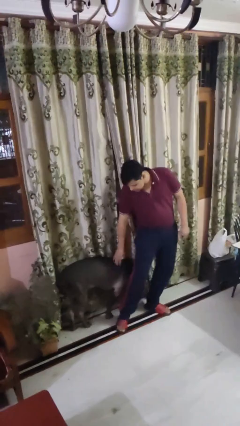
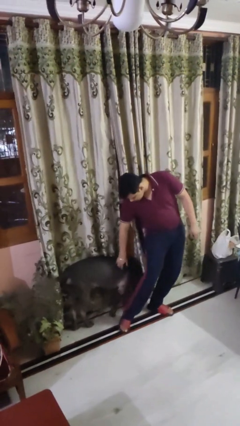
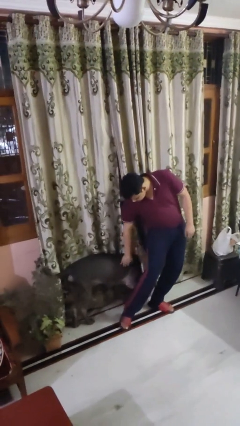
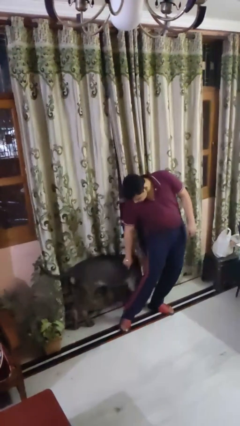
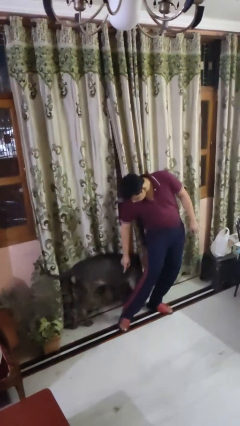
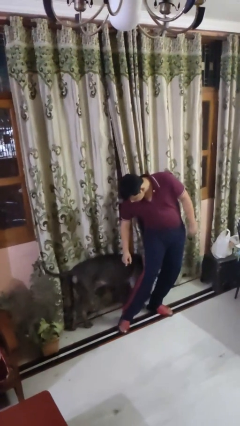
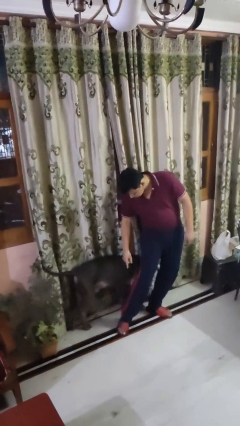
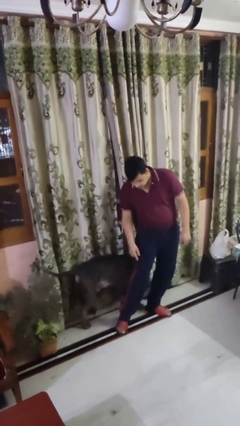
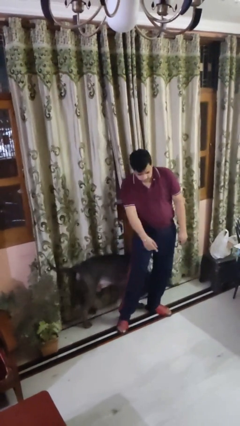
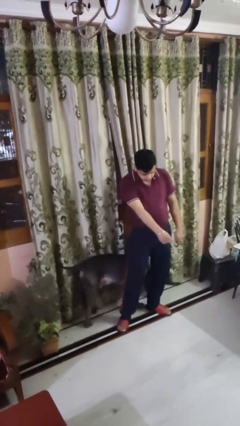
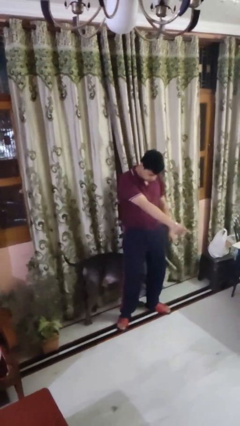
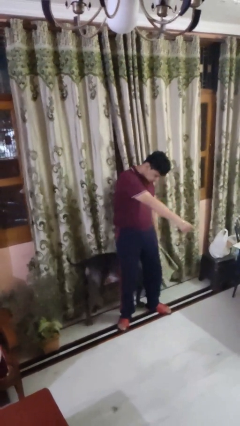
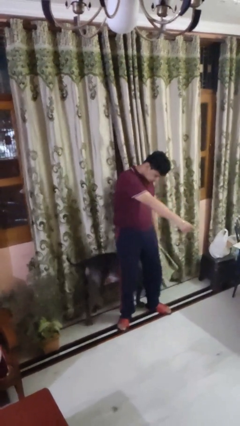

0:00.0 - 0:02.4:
person points to dog

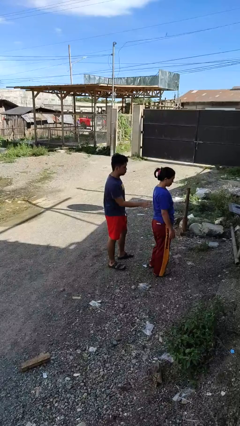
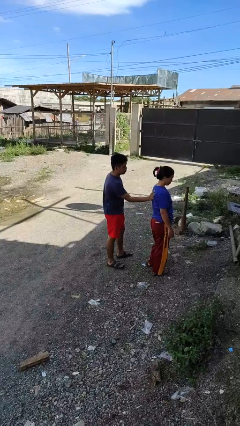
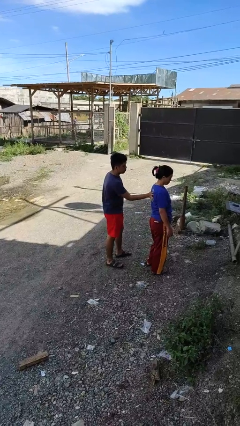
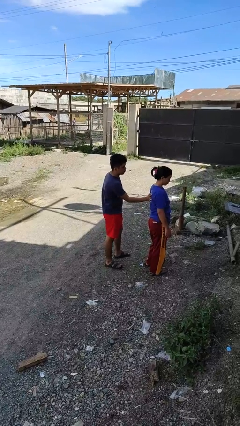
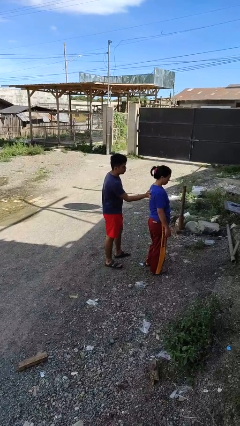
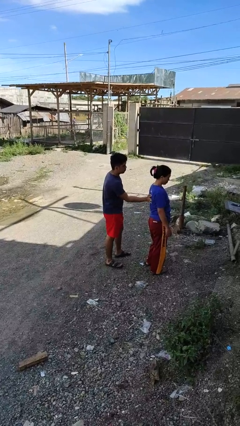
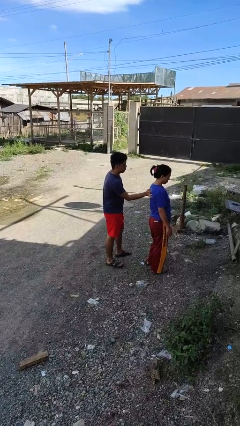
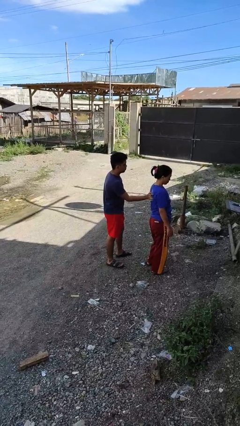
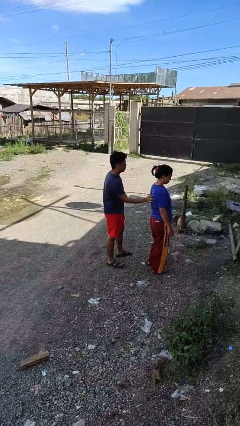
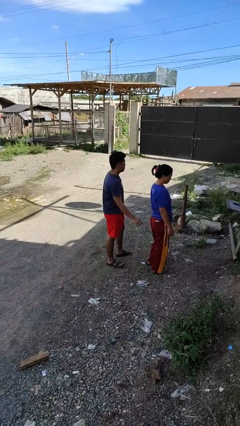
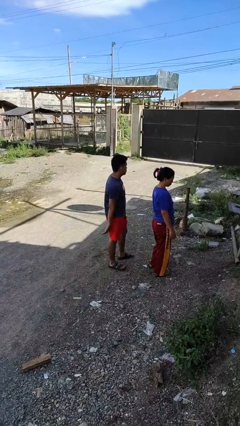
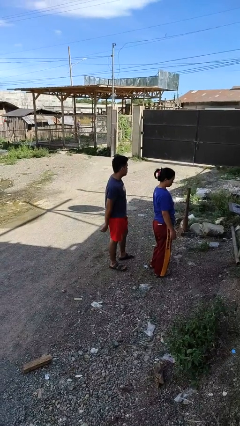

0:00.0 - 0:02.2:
person touches back of person

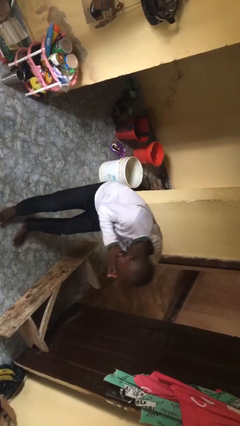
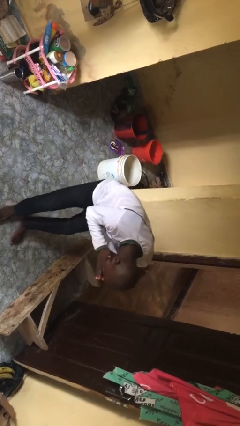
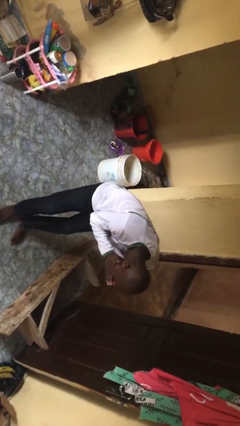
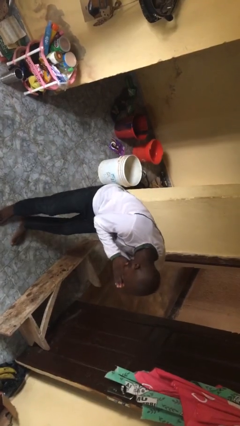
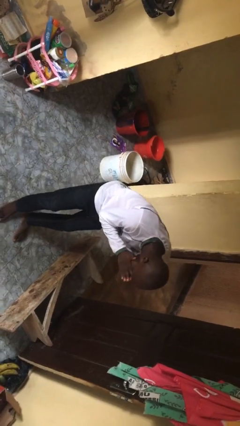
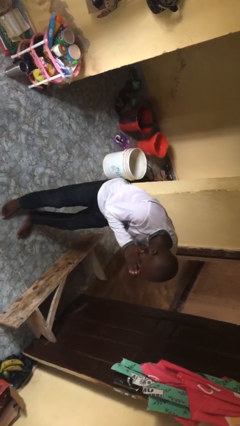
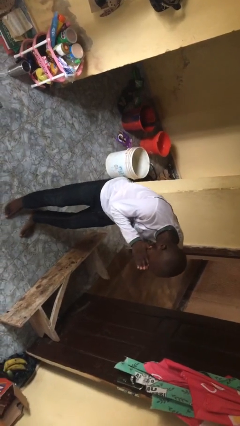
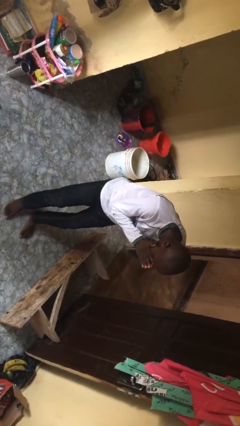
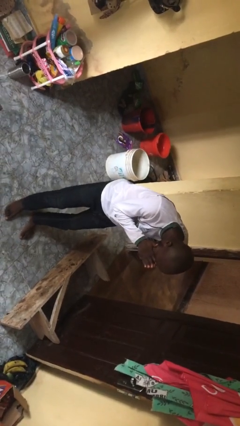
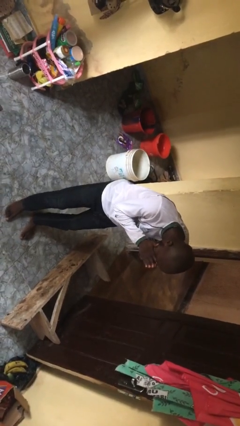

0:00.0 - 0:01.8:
person sneezes into hand

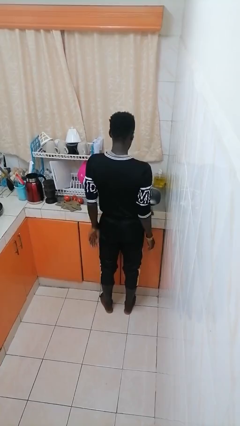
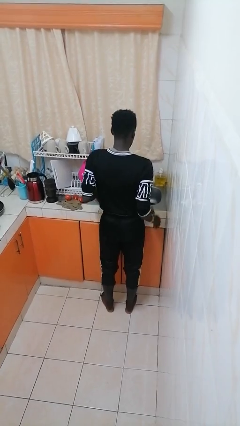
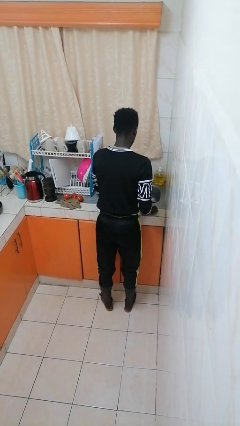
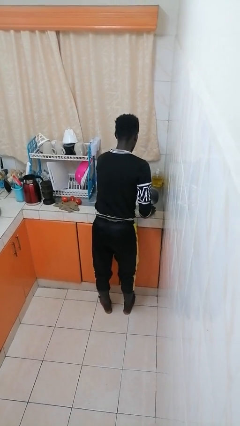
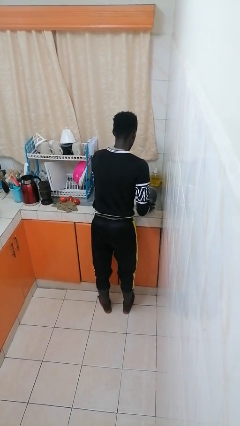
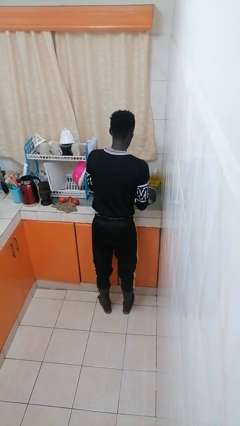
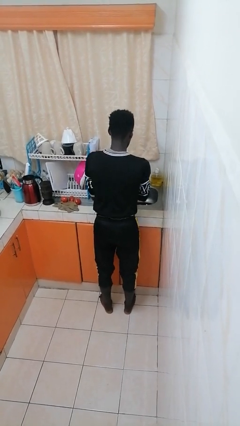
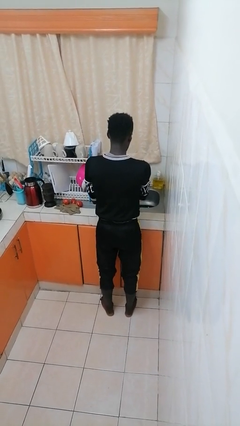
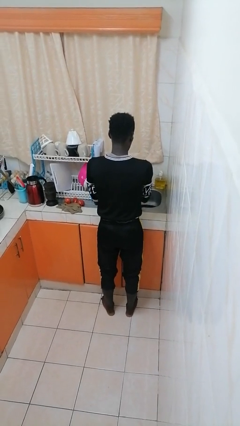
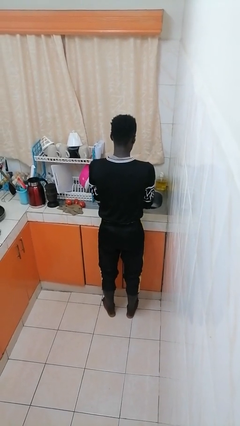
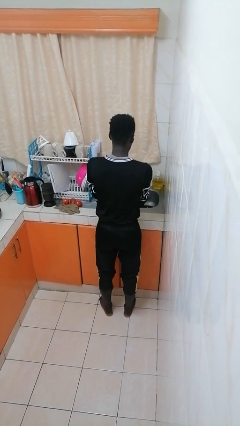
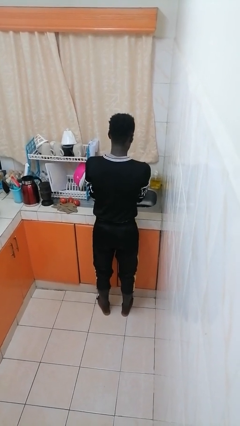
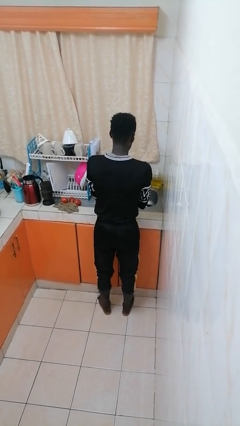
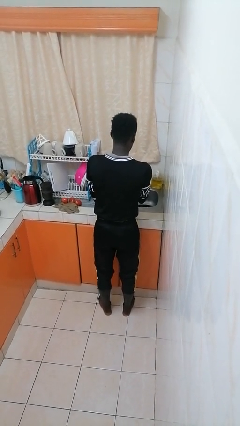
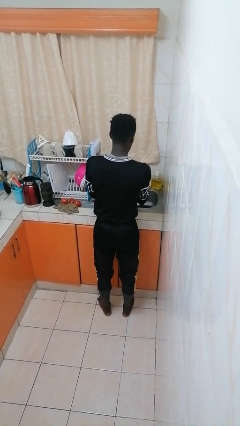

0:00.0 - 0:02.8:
person washes dish

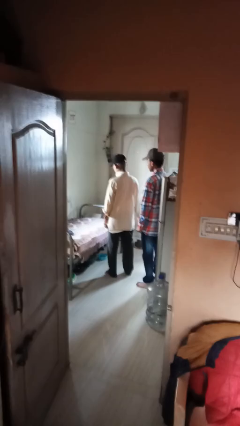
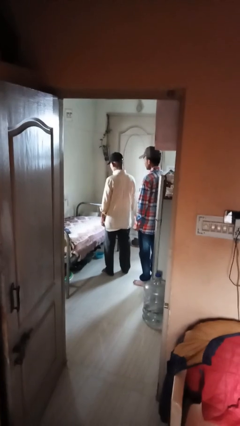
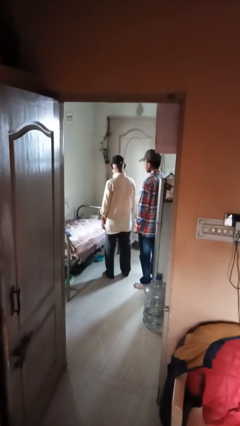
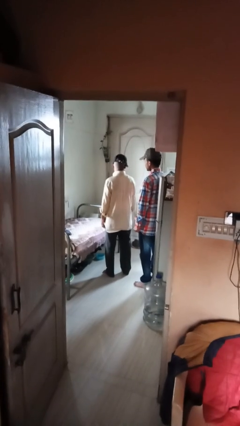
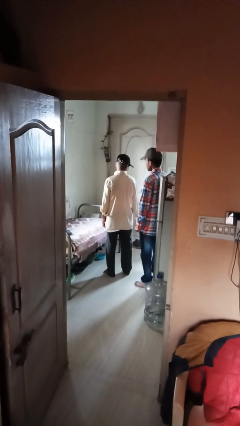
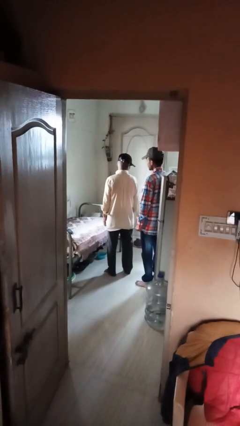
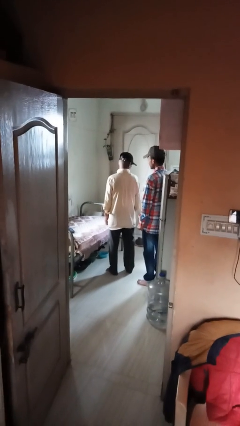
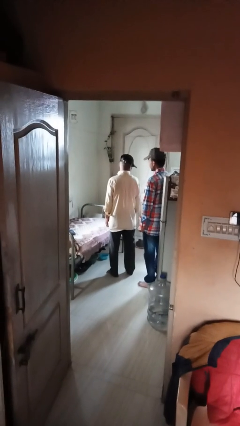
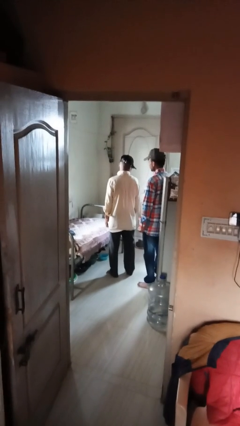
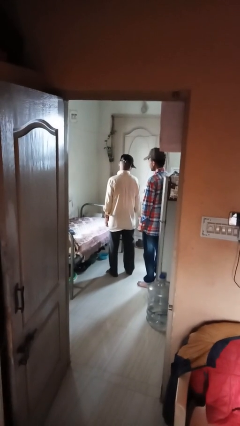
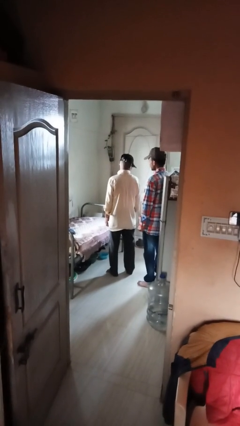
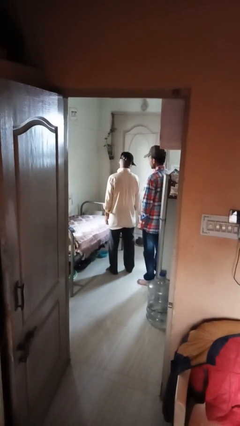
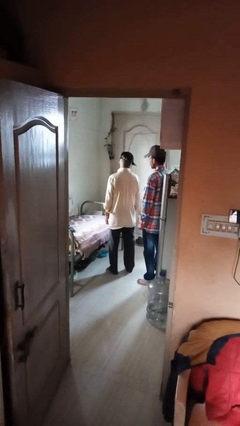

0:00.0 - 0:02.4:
person looks over shoulder

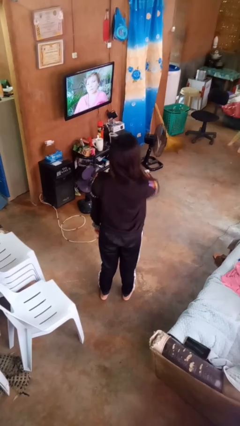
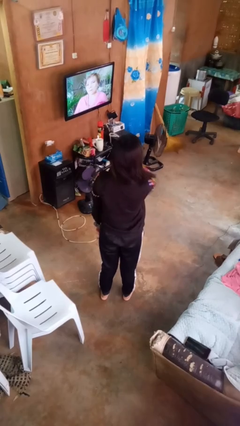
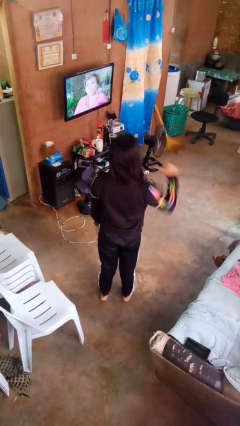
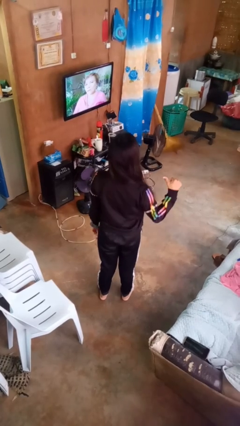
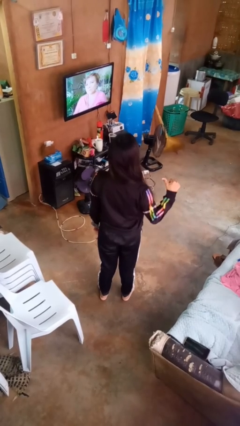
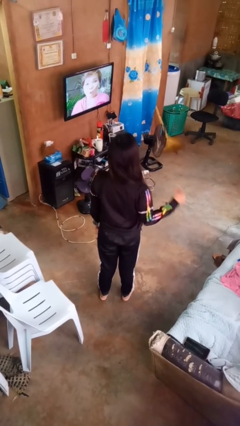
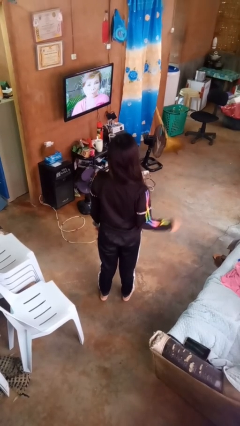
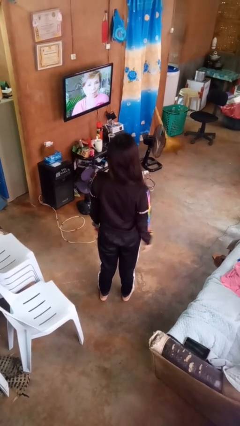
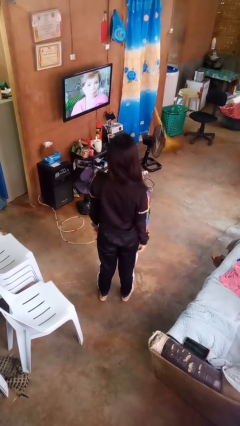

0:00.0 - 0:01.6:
person gestures cut

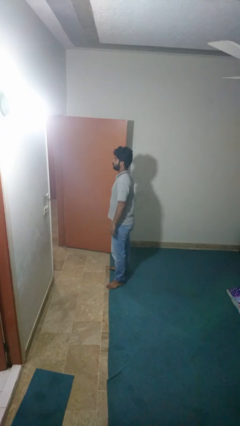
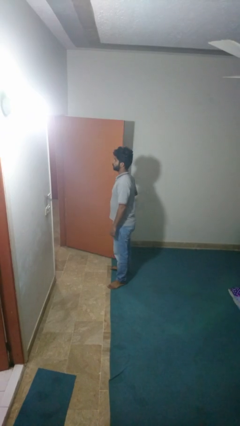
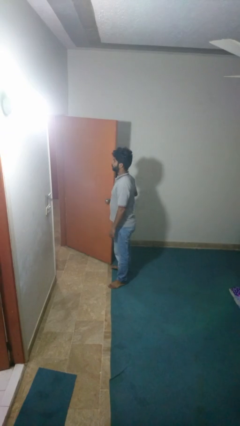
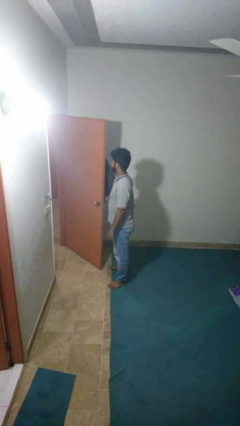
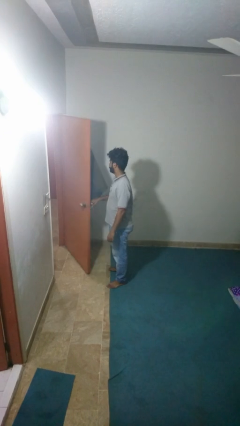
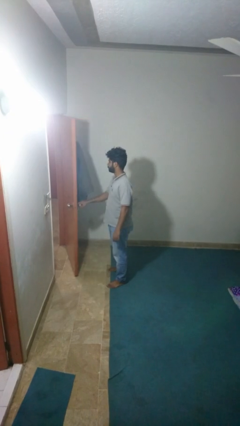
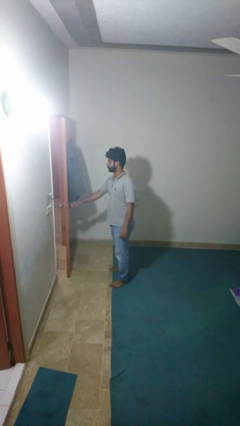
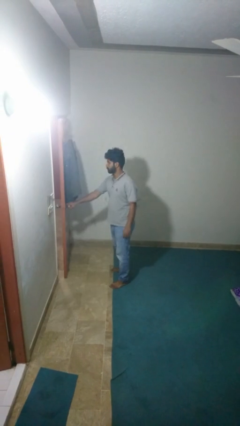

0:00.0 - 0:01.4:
person closes facility door

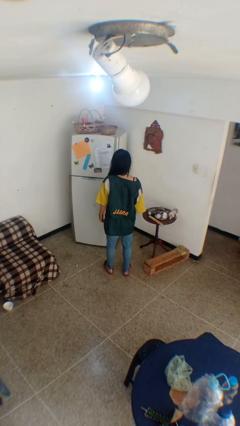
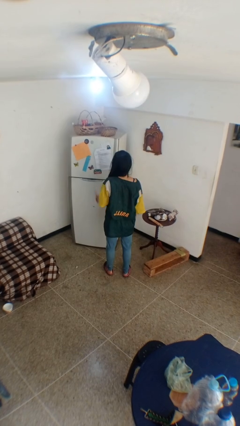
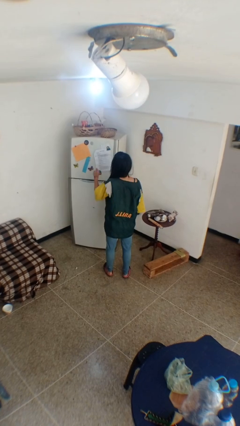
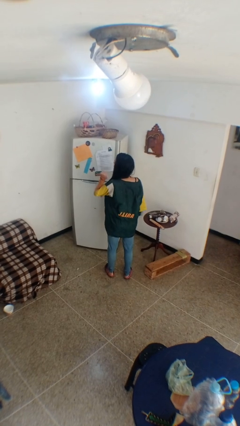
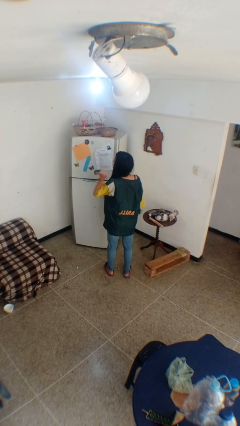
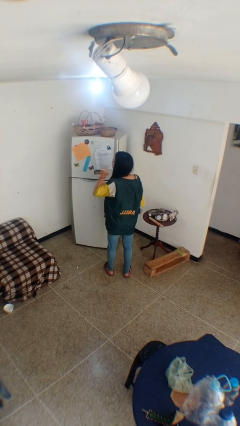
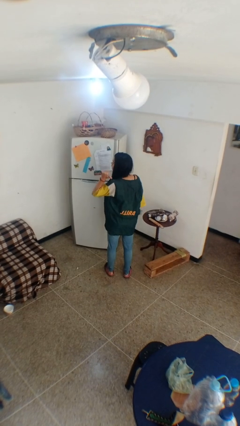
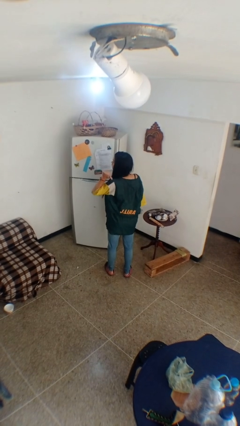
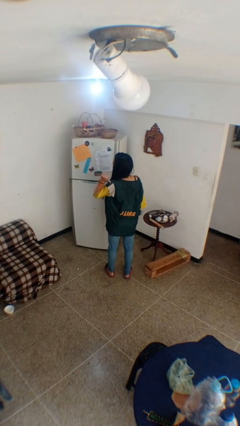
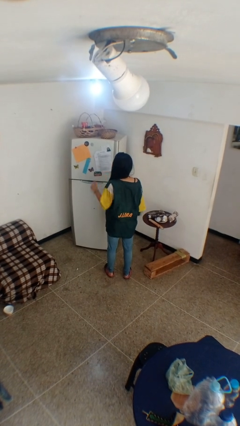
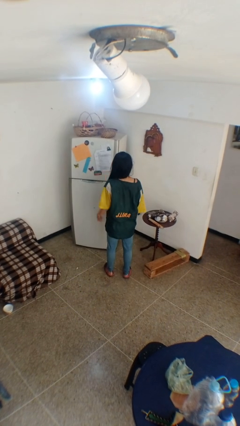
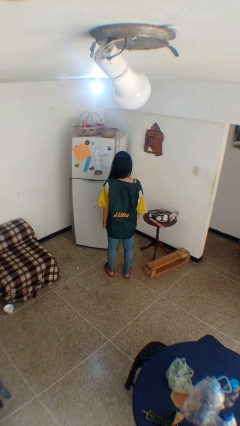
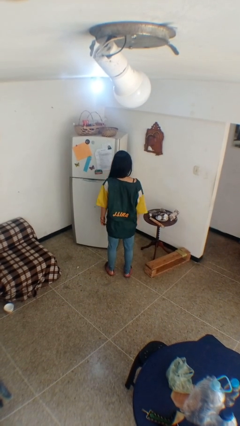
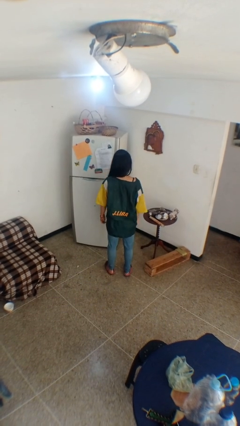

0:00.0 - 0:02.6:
person gestures behind me
